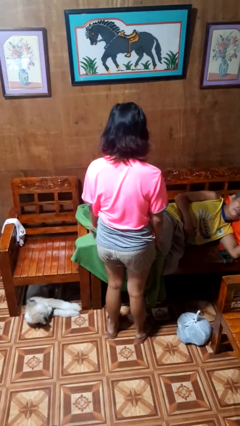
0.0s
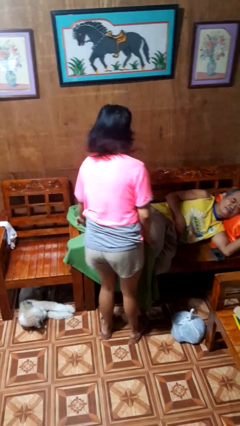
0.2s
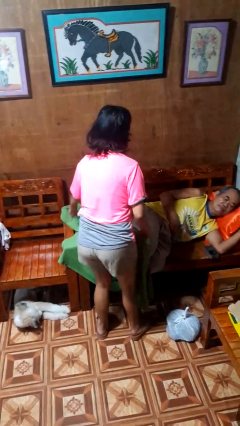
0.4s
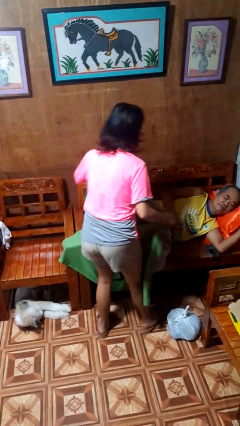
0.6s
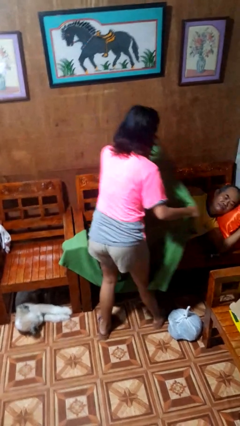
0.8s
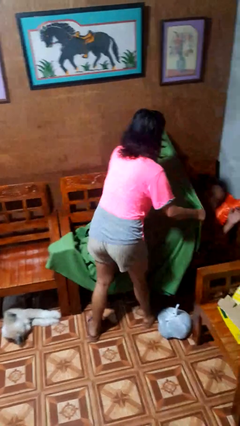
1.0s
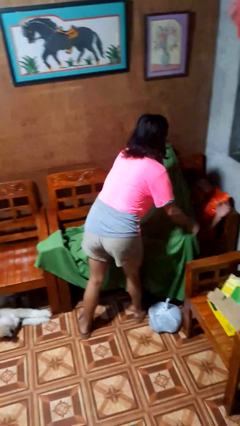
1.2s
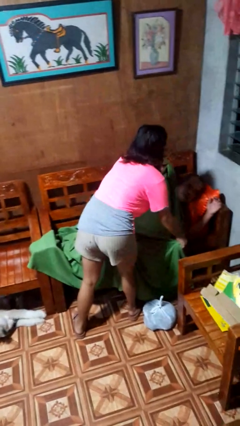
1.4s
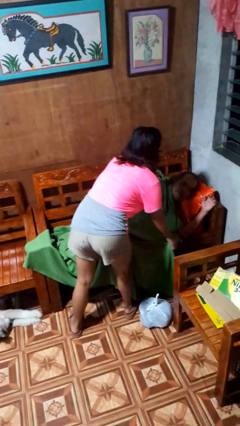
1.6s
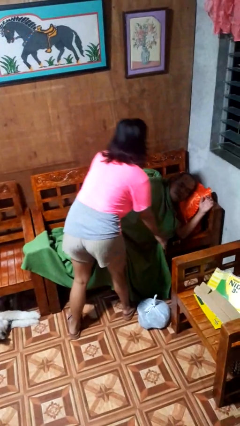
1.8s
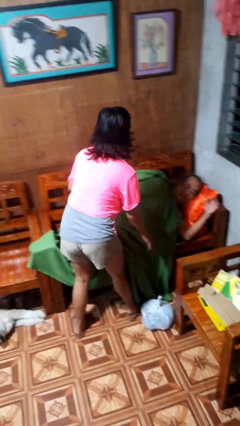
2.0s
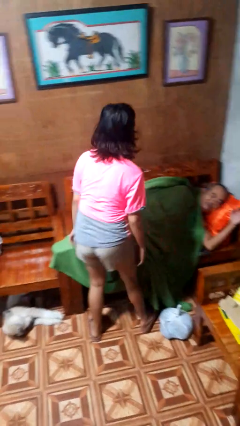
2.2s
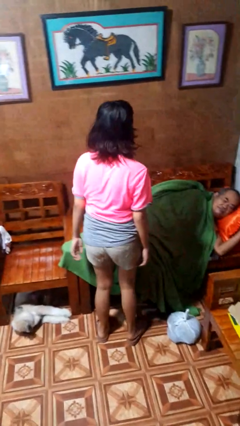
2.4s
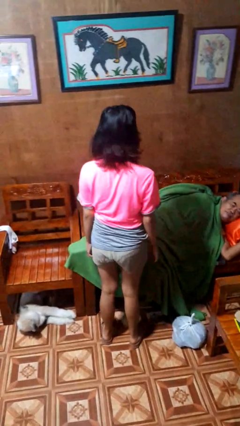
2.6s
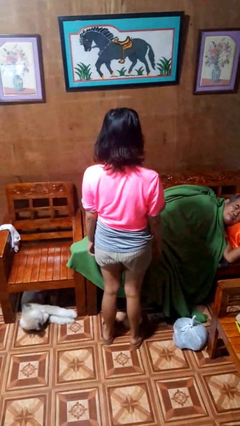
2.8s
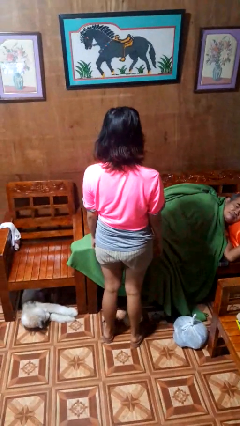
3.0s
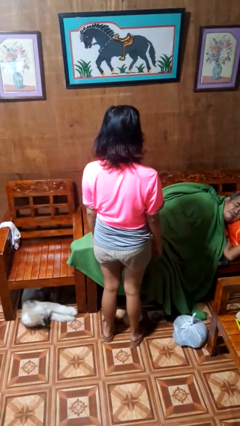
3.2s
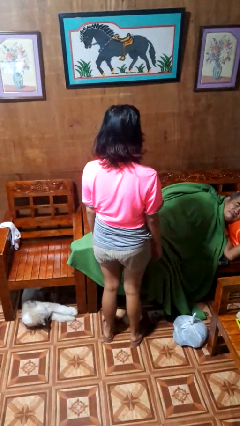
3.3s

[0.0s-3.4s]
person covers friend with blanket

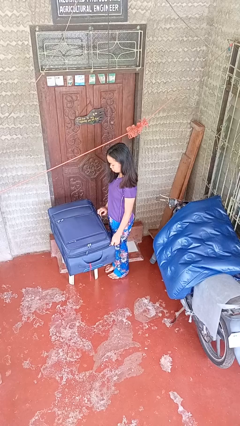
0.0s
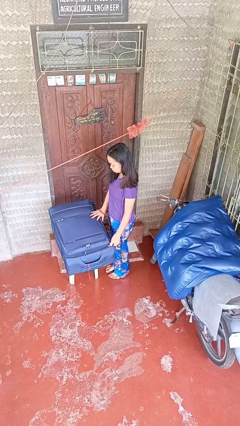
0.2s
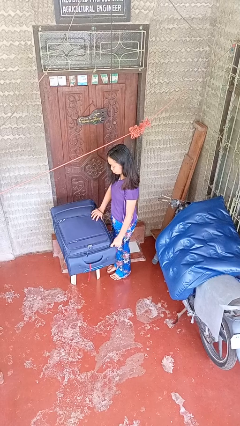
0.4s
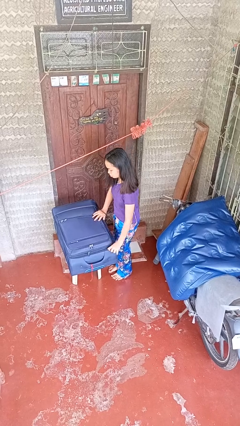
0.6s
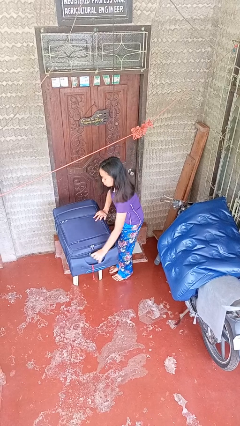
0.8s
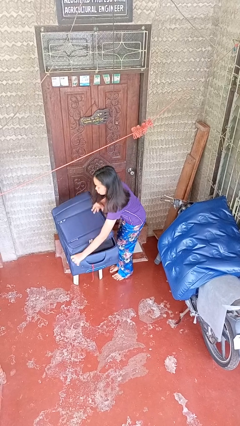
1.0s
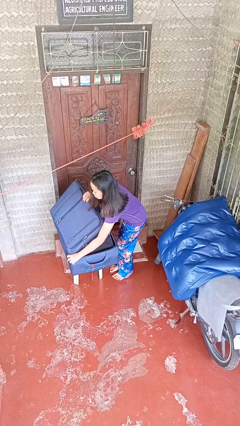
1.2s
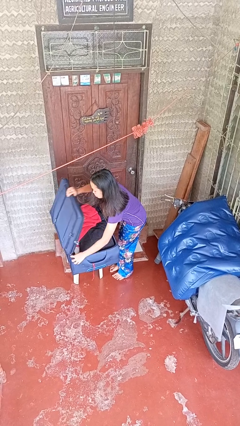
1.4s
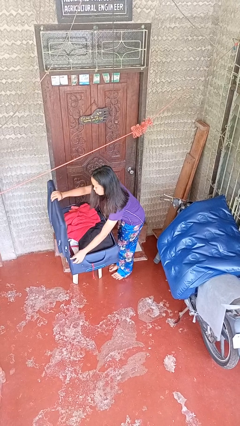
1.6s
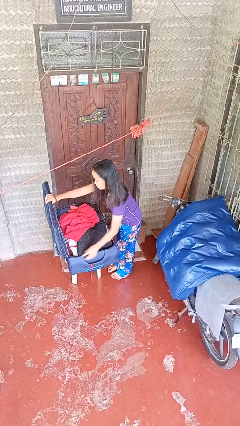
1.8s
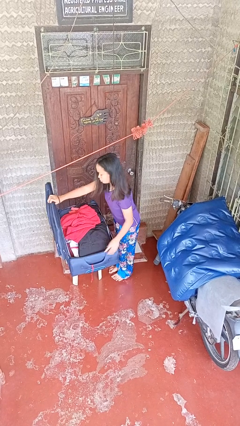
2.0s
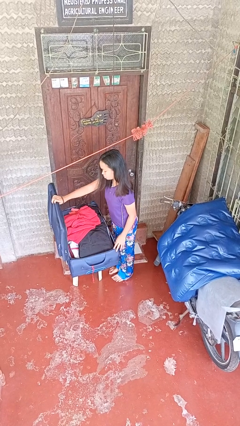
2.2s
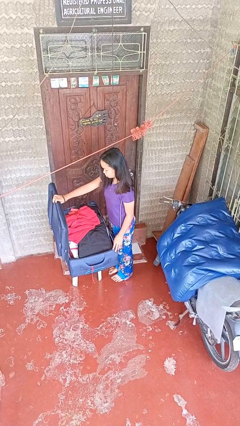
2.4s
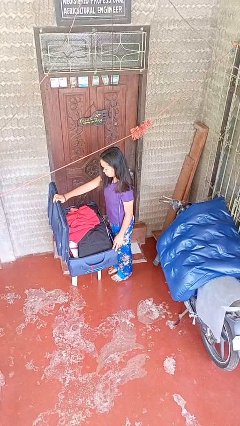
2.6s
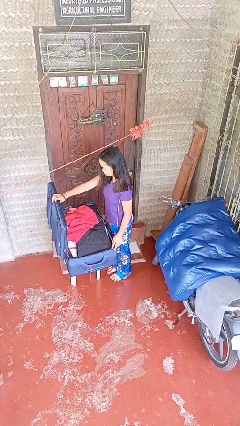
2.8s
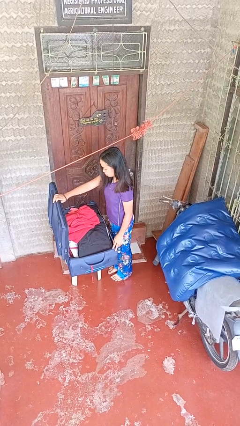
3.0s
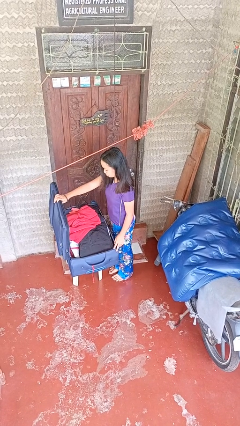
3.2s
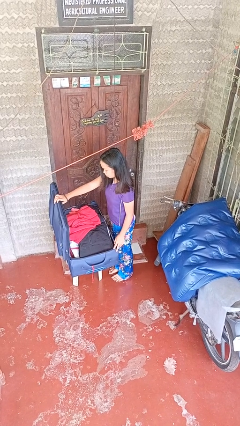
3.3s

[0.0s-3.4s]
person opens suitcase

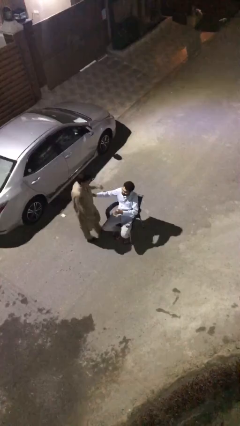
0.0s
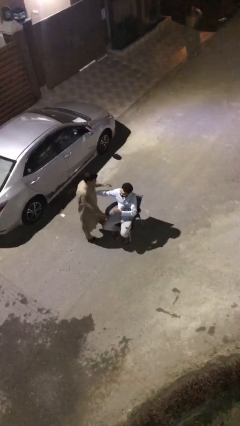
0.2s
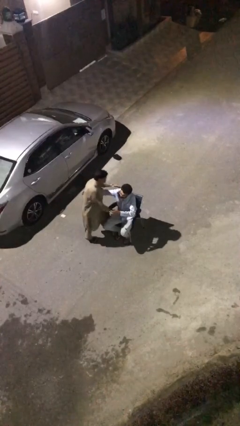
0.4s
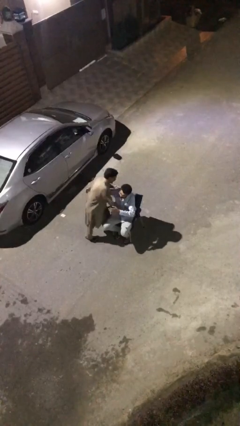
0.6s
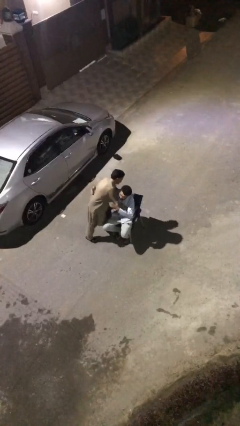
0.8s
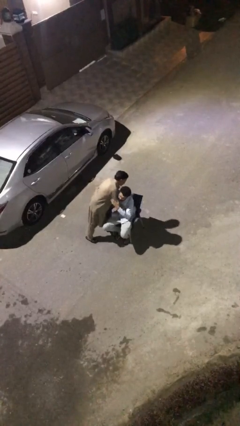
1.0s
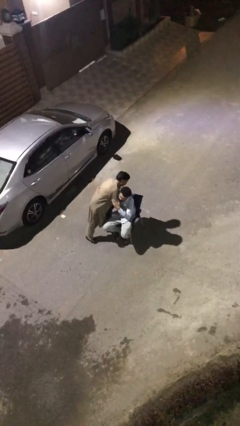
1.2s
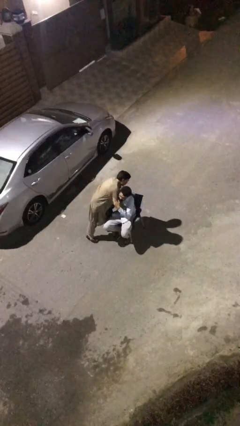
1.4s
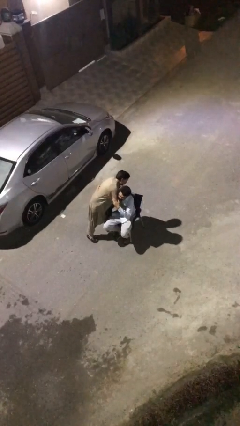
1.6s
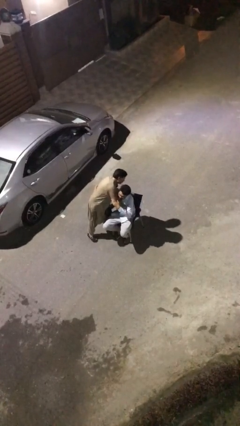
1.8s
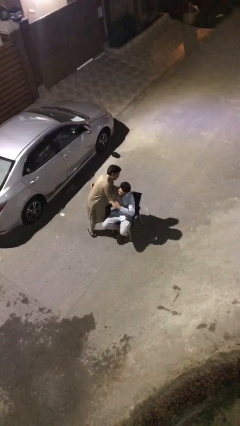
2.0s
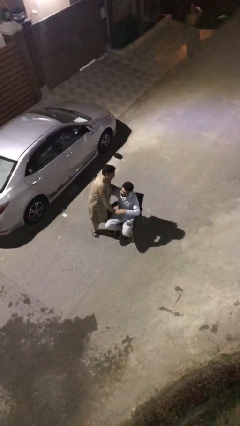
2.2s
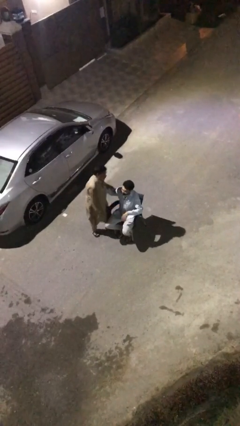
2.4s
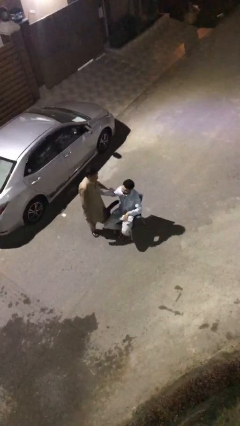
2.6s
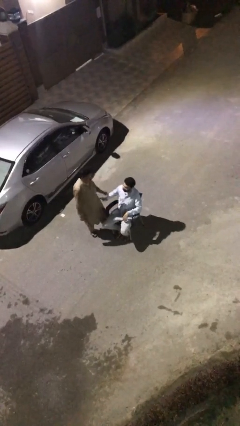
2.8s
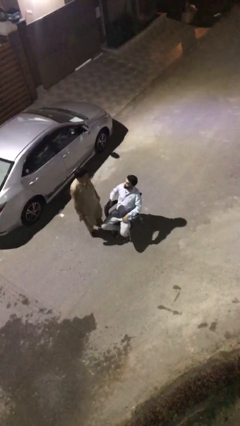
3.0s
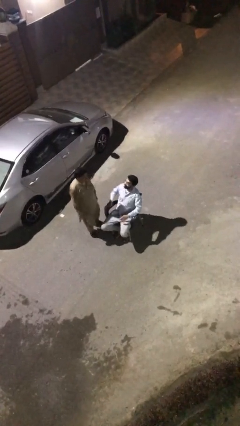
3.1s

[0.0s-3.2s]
person embraces person

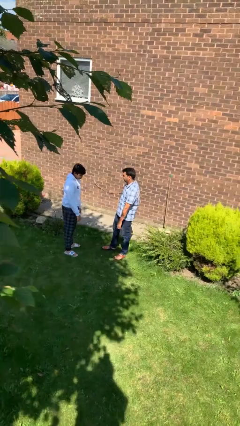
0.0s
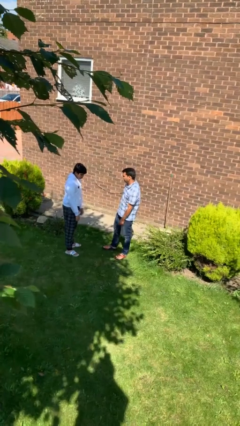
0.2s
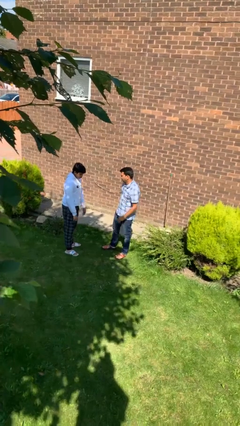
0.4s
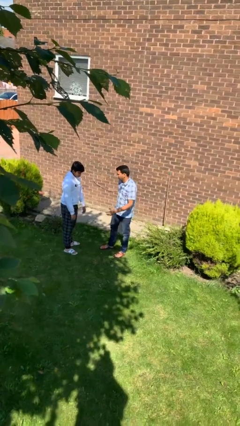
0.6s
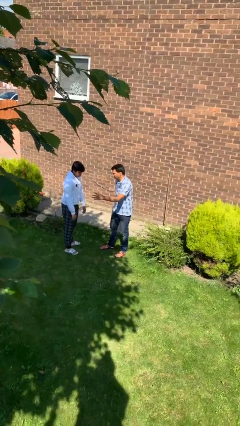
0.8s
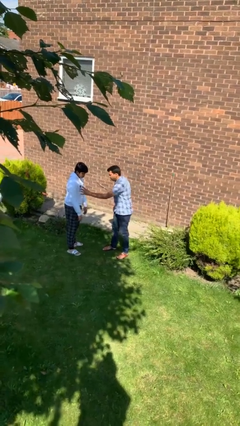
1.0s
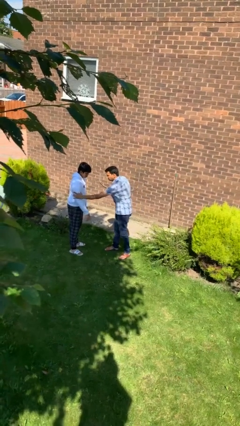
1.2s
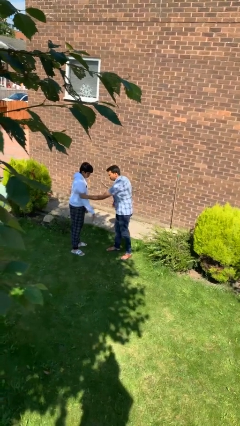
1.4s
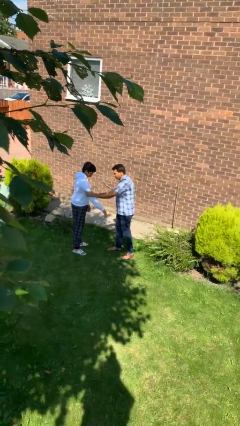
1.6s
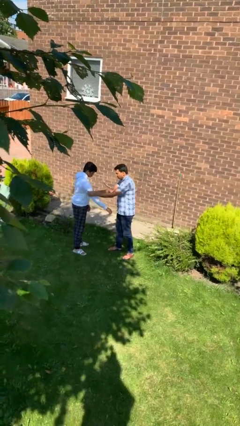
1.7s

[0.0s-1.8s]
person grabs person by bicep

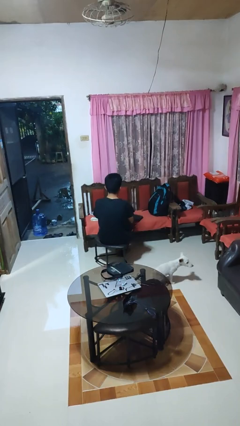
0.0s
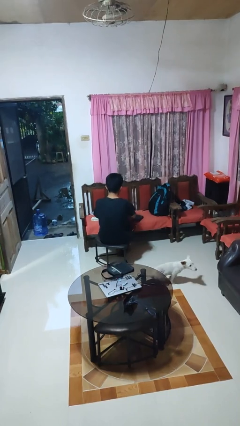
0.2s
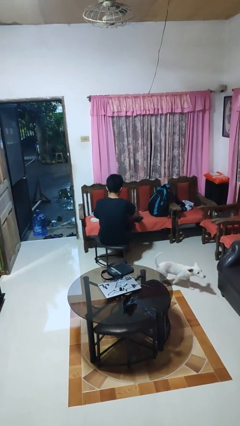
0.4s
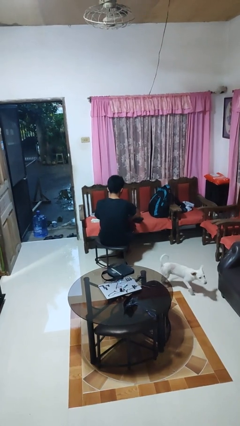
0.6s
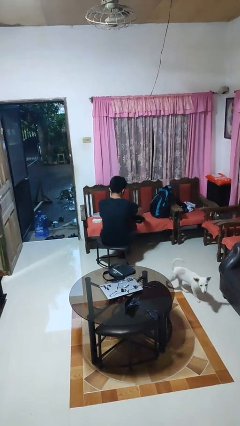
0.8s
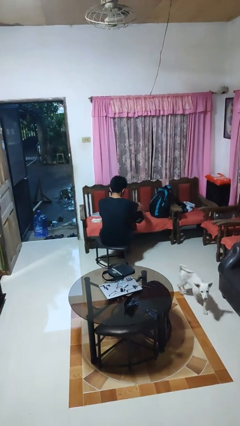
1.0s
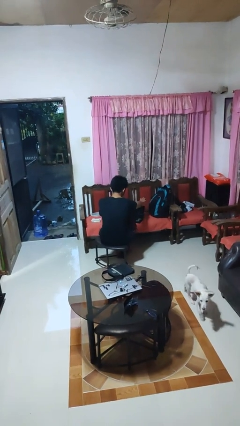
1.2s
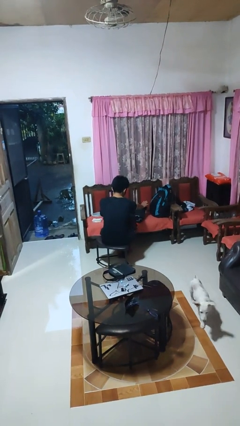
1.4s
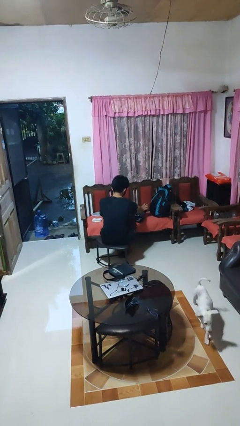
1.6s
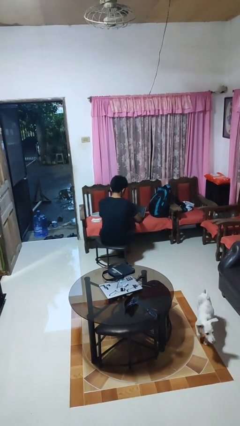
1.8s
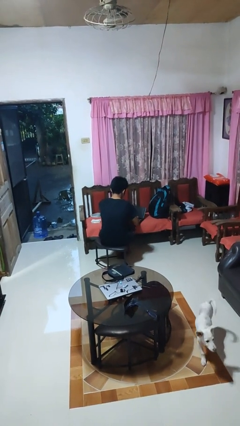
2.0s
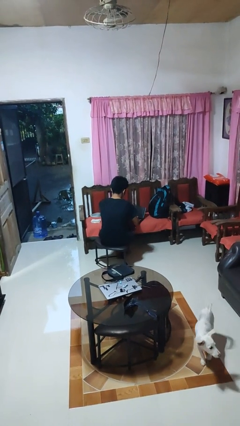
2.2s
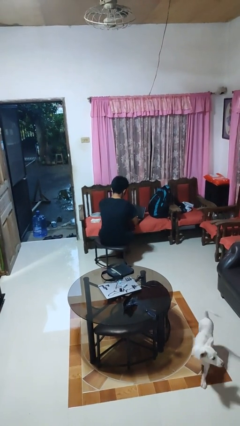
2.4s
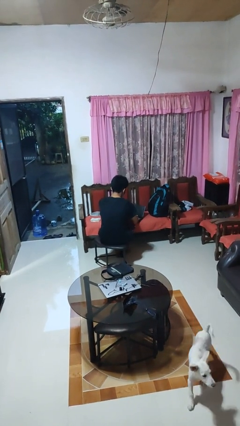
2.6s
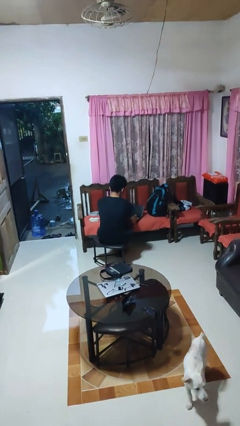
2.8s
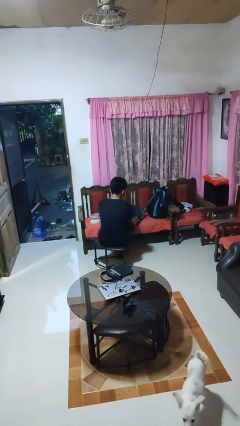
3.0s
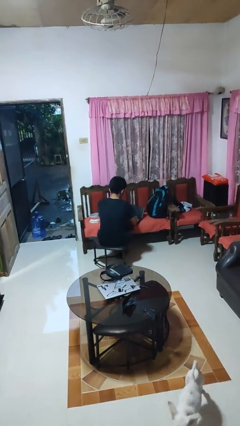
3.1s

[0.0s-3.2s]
person opens laptop

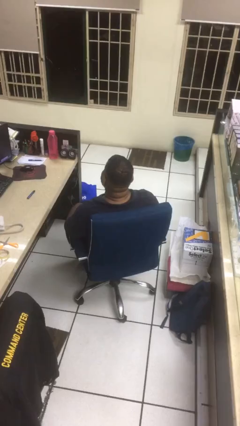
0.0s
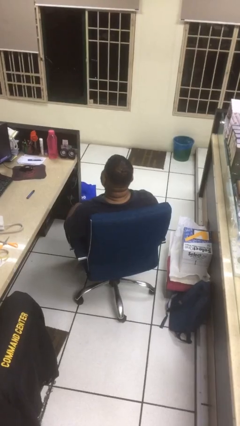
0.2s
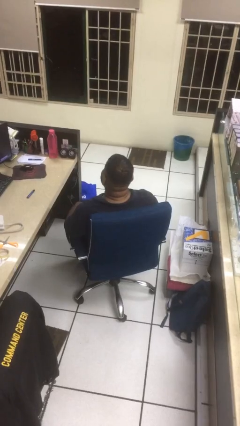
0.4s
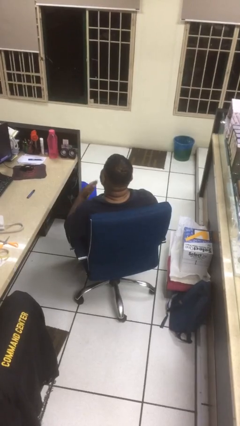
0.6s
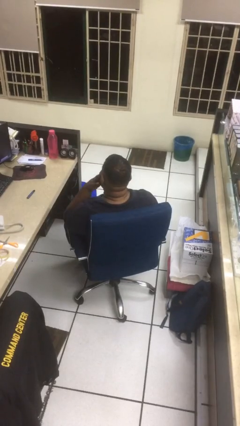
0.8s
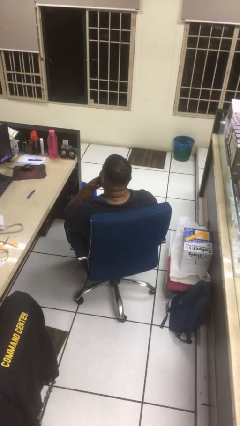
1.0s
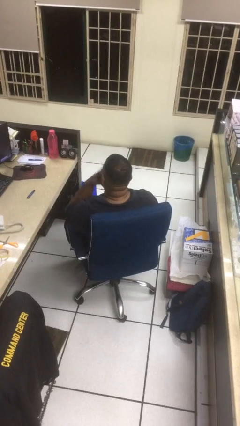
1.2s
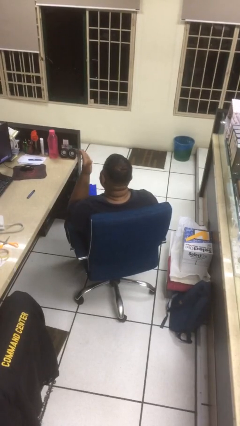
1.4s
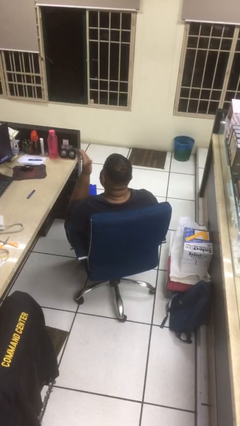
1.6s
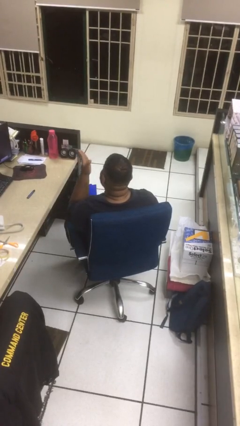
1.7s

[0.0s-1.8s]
person gestures blow kiss

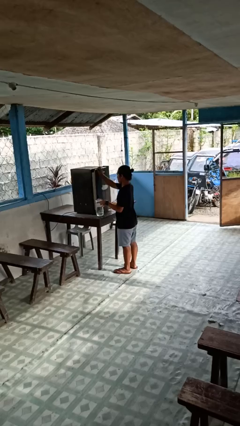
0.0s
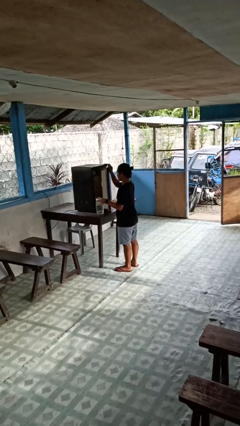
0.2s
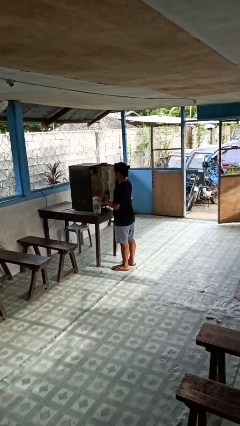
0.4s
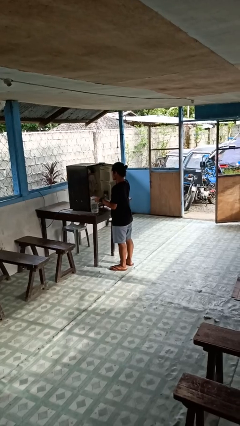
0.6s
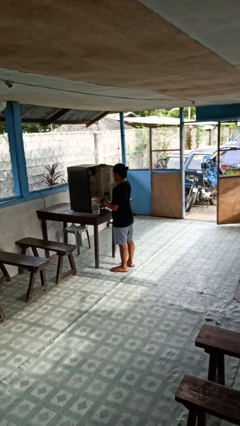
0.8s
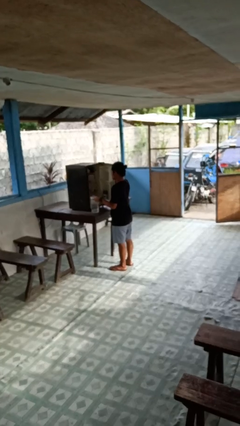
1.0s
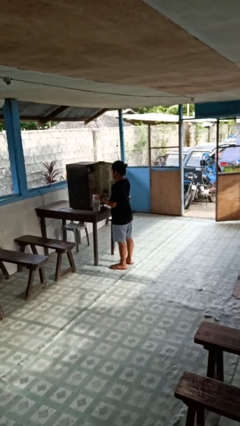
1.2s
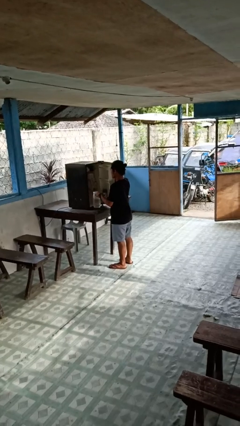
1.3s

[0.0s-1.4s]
person opens refrigerator
